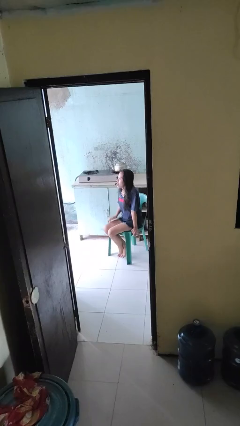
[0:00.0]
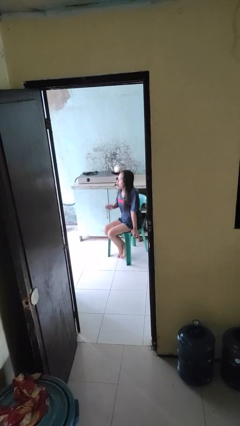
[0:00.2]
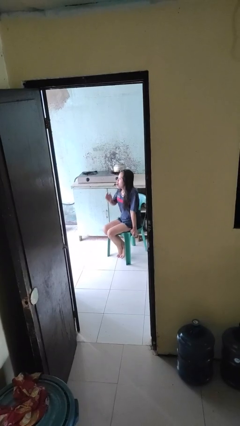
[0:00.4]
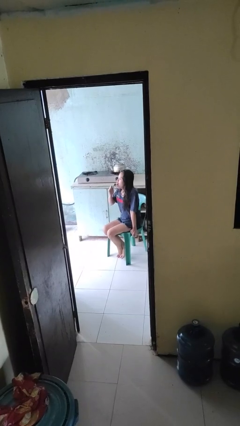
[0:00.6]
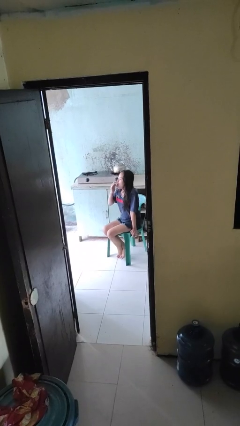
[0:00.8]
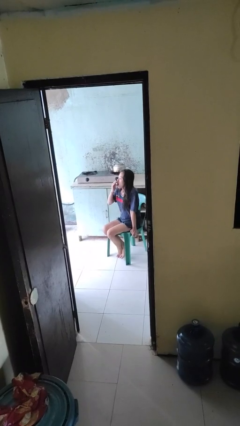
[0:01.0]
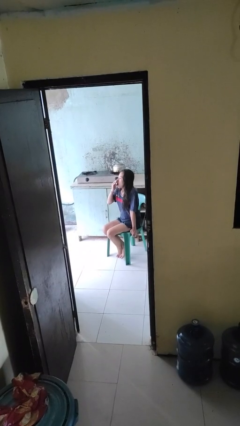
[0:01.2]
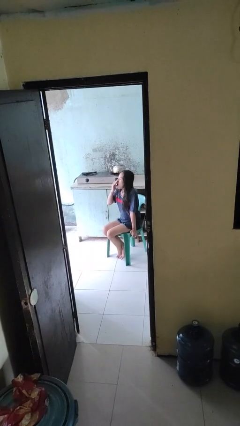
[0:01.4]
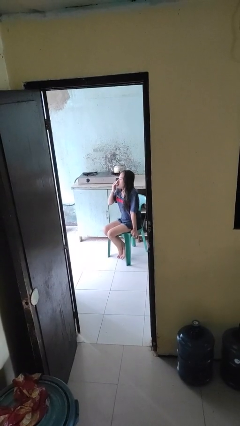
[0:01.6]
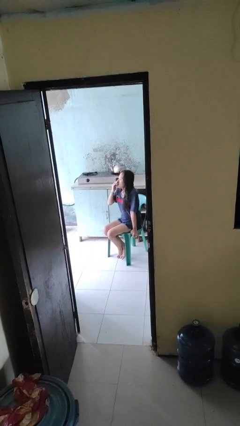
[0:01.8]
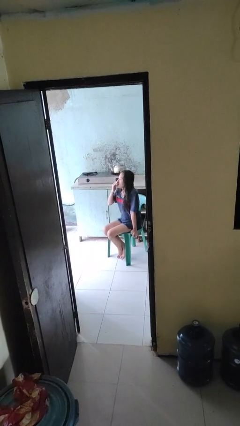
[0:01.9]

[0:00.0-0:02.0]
person yawns

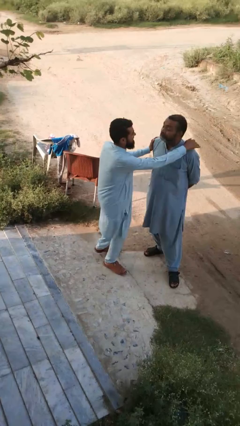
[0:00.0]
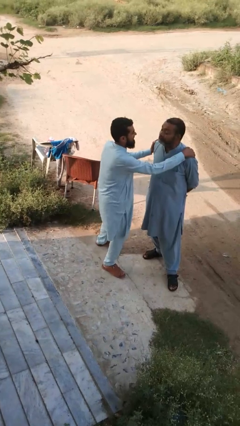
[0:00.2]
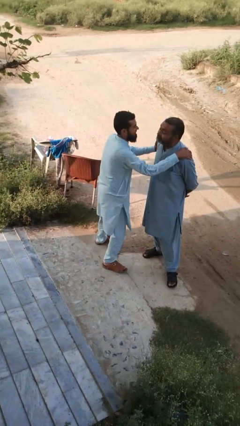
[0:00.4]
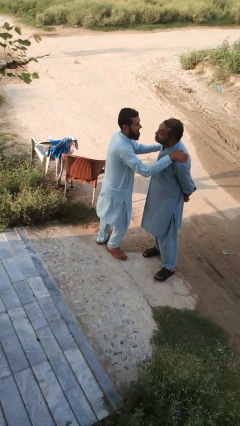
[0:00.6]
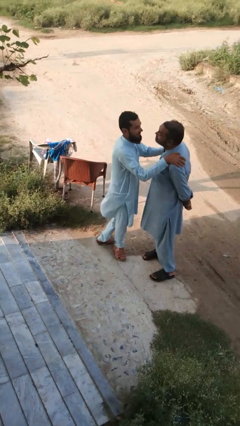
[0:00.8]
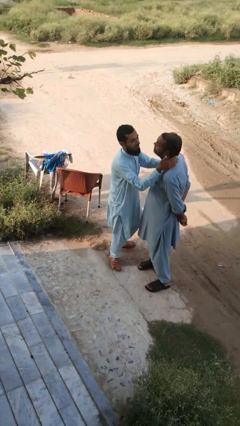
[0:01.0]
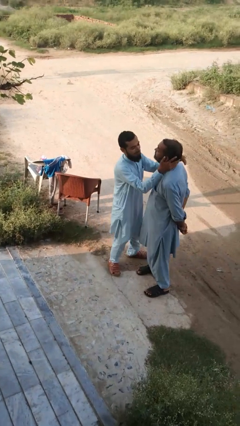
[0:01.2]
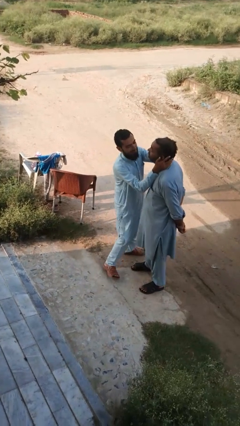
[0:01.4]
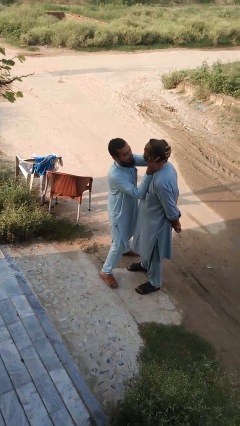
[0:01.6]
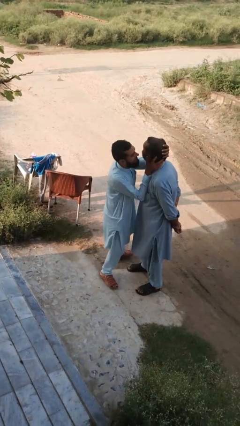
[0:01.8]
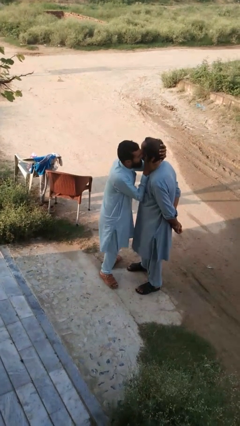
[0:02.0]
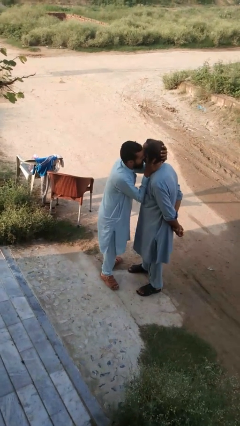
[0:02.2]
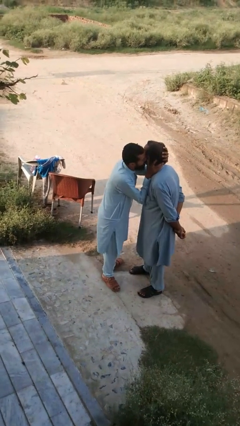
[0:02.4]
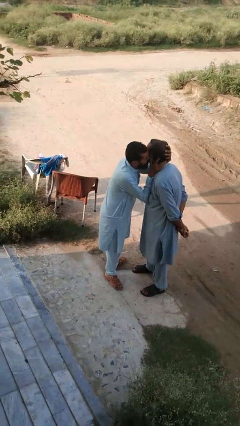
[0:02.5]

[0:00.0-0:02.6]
person kisses cheek of person

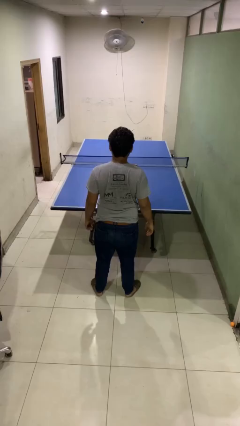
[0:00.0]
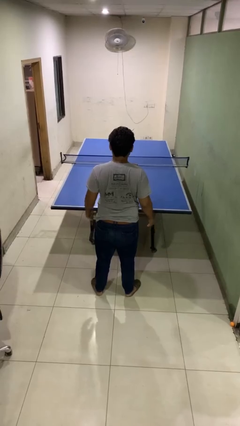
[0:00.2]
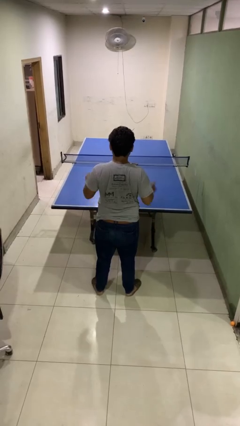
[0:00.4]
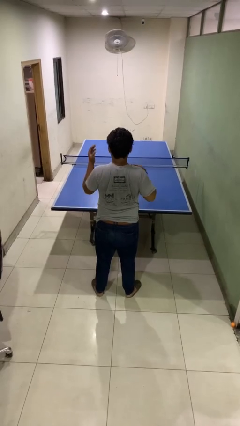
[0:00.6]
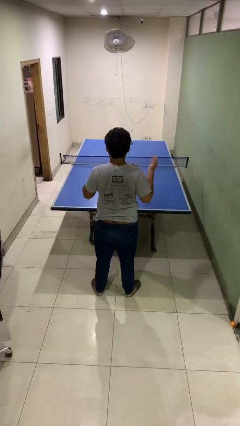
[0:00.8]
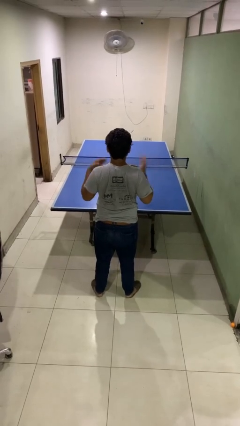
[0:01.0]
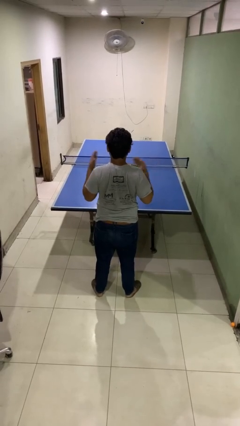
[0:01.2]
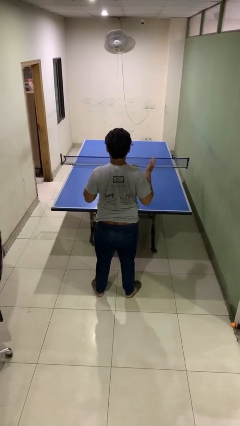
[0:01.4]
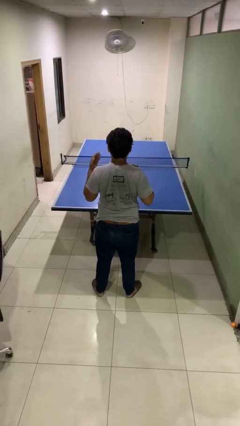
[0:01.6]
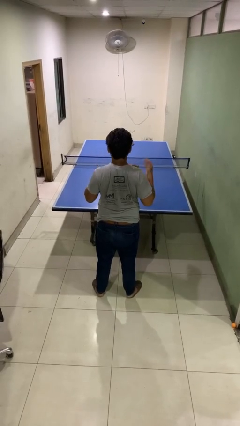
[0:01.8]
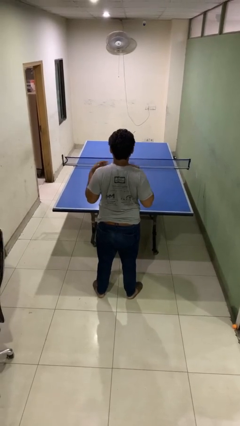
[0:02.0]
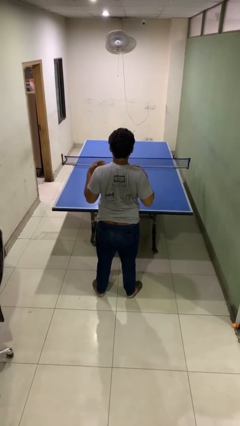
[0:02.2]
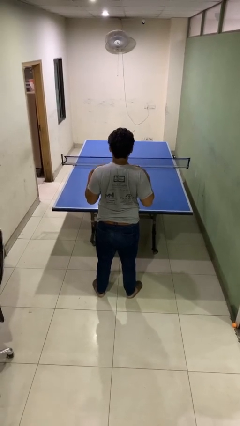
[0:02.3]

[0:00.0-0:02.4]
person drums on chest

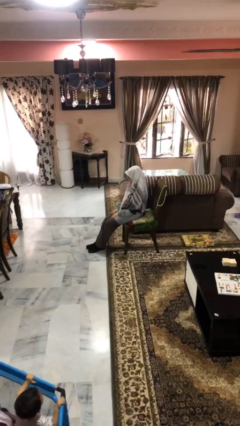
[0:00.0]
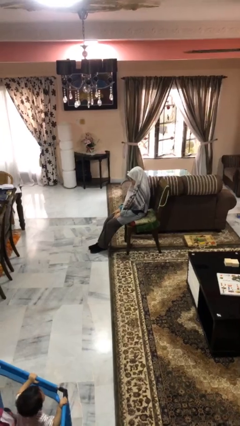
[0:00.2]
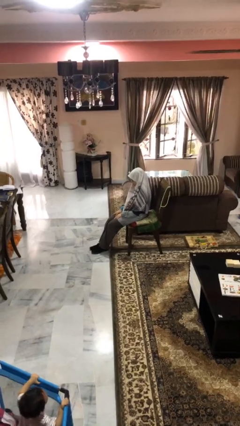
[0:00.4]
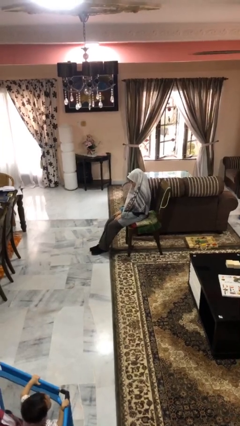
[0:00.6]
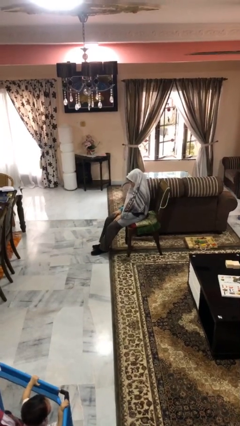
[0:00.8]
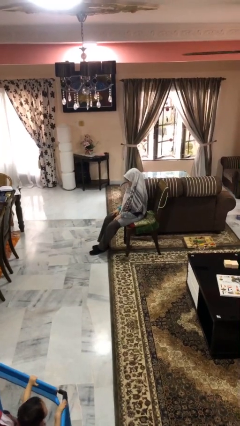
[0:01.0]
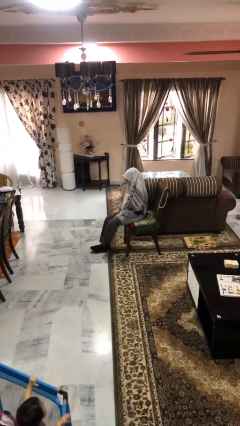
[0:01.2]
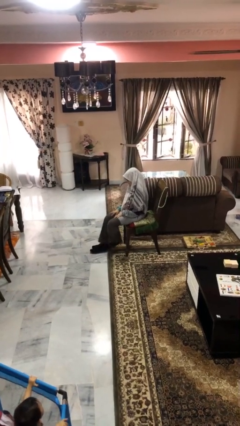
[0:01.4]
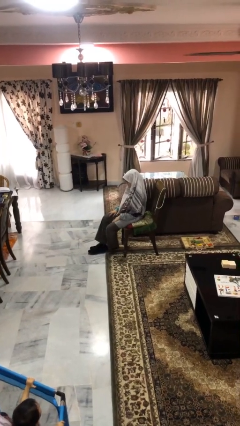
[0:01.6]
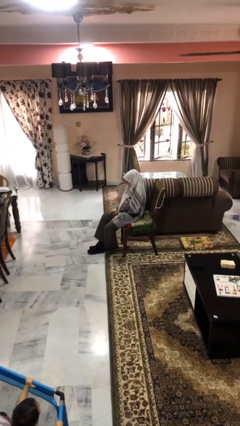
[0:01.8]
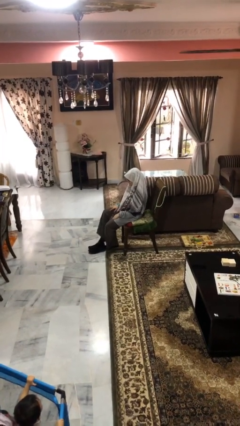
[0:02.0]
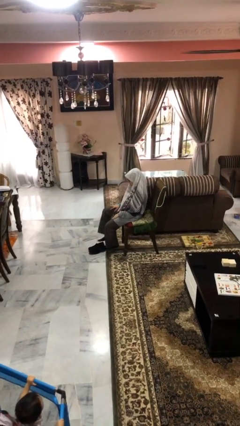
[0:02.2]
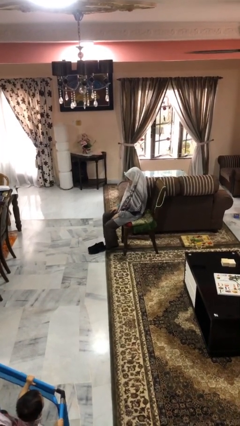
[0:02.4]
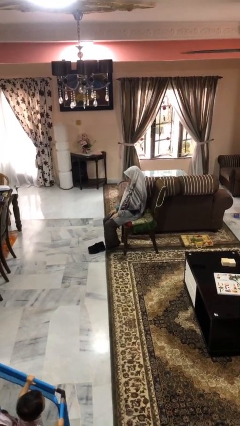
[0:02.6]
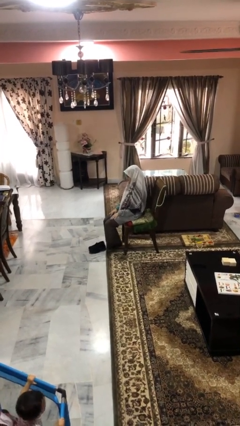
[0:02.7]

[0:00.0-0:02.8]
person takes off shoes

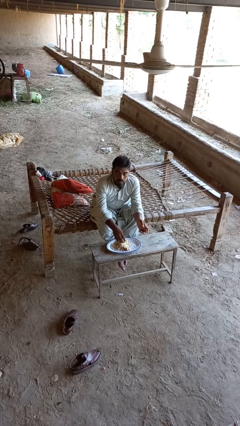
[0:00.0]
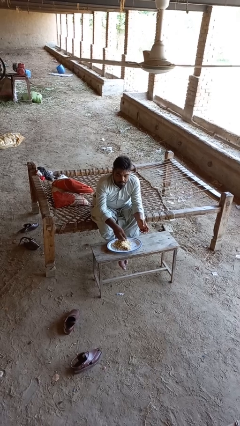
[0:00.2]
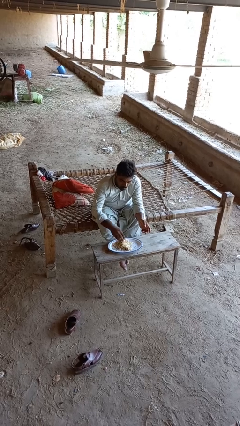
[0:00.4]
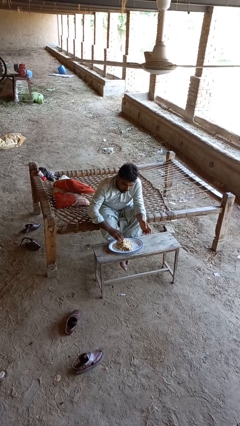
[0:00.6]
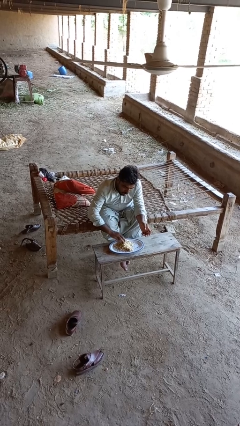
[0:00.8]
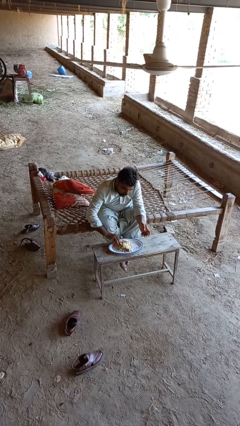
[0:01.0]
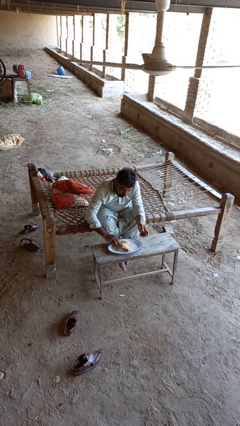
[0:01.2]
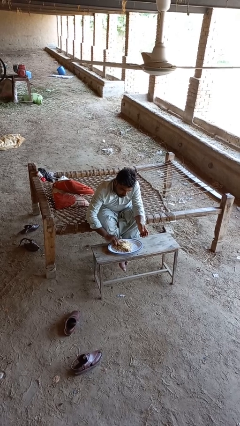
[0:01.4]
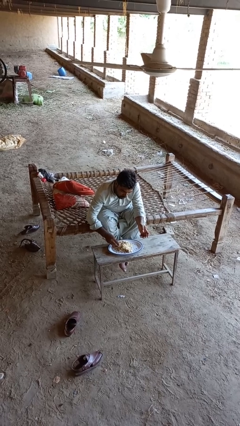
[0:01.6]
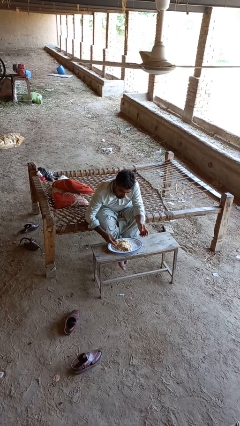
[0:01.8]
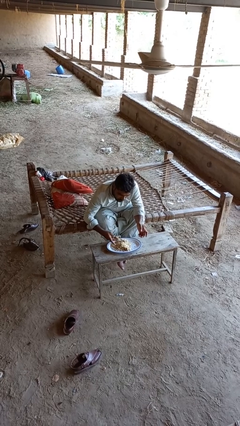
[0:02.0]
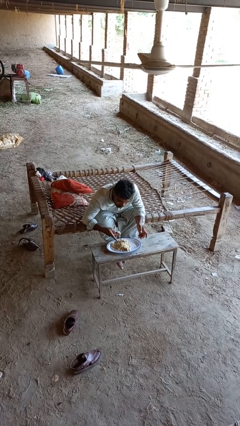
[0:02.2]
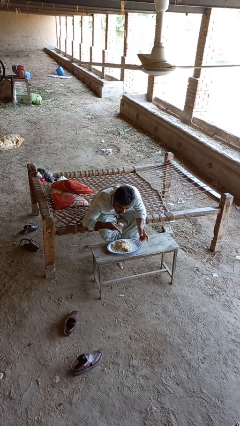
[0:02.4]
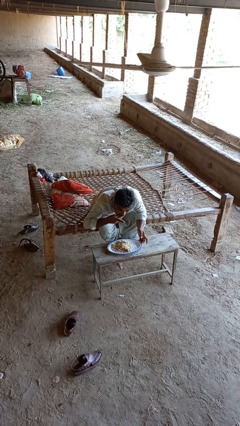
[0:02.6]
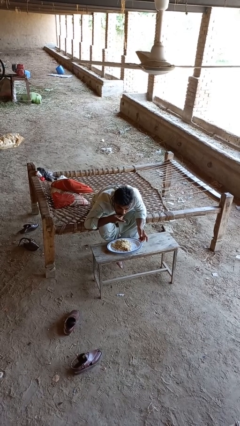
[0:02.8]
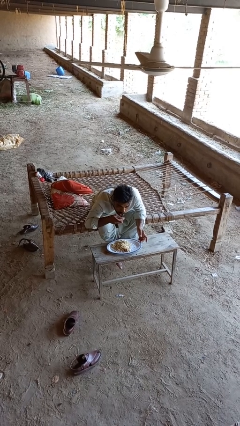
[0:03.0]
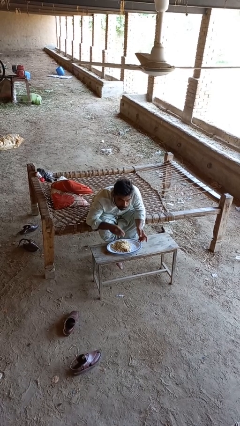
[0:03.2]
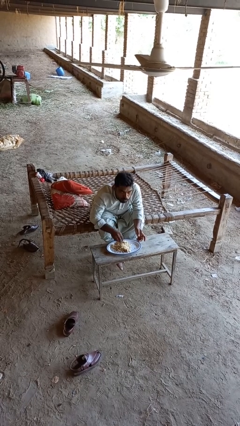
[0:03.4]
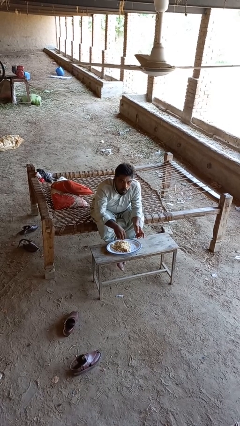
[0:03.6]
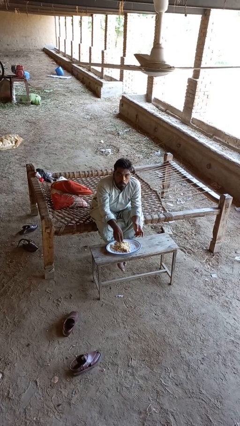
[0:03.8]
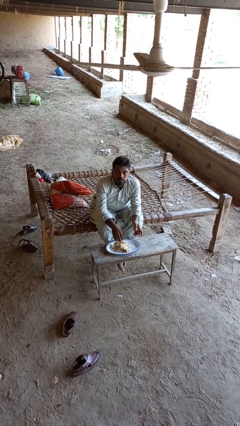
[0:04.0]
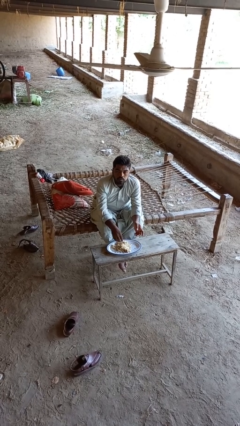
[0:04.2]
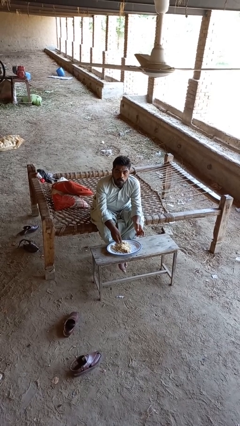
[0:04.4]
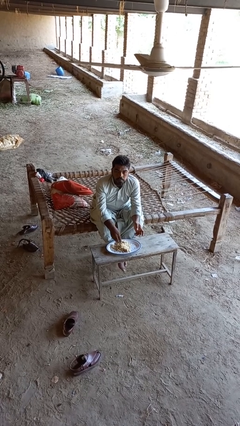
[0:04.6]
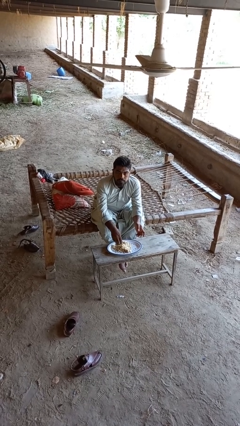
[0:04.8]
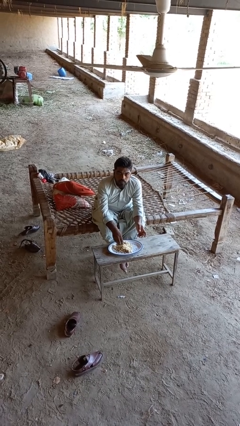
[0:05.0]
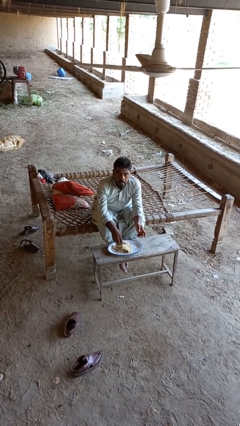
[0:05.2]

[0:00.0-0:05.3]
person eats with hands

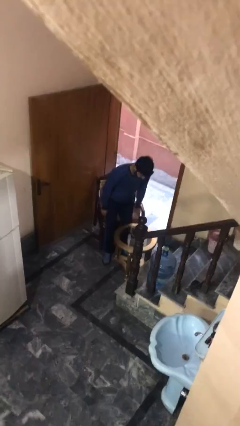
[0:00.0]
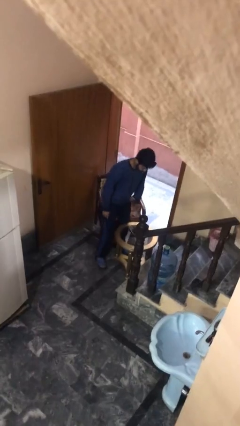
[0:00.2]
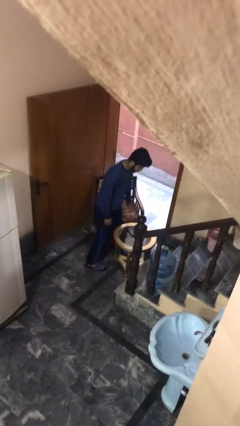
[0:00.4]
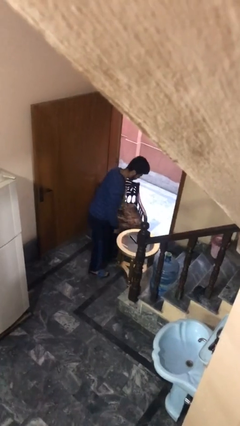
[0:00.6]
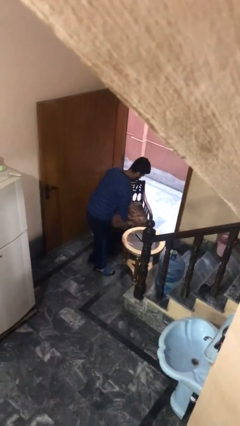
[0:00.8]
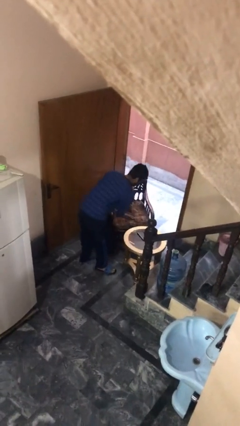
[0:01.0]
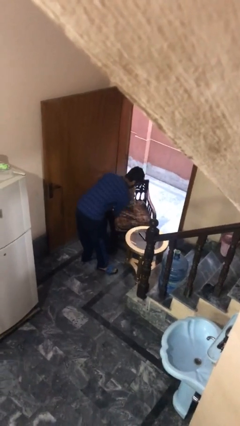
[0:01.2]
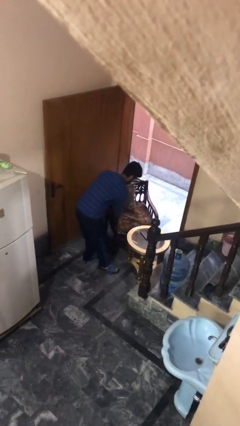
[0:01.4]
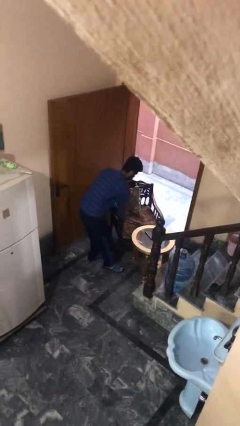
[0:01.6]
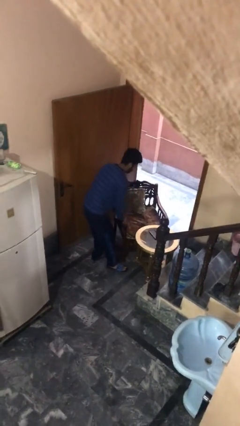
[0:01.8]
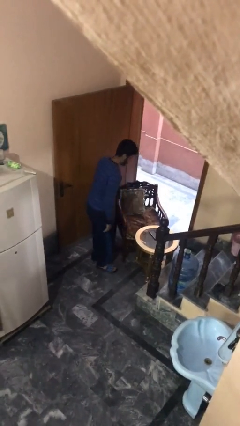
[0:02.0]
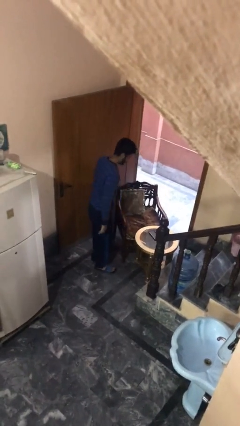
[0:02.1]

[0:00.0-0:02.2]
person stands up

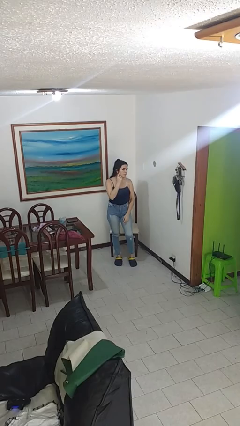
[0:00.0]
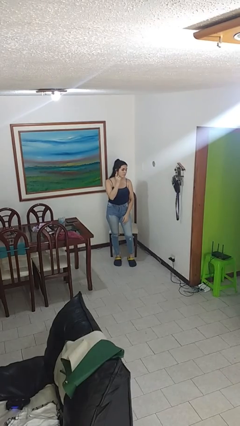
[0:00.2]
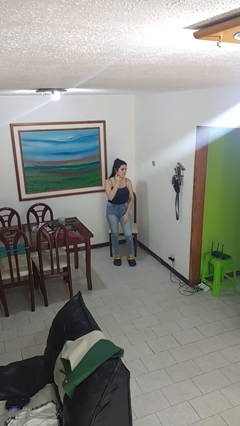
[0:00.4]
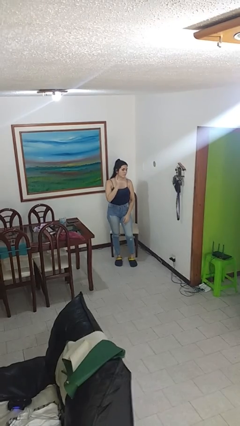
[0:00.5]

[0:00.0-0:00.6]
person gestures listen closely
